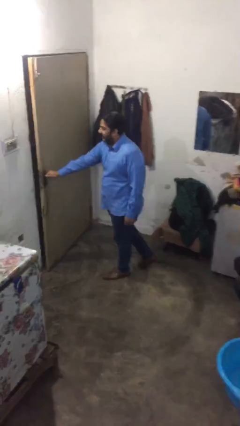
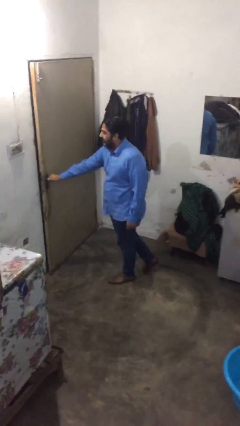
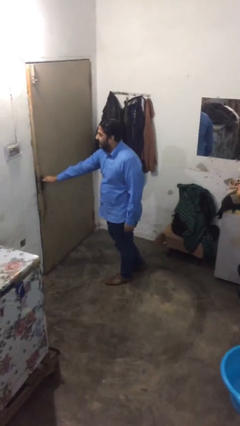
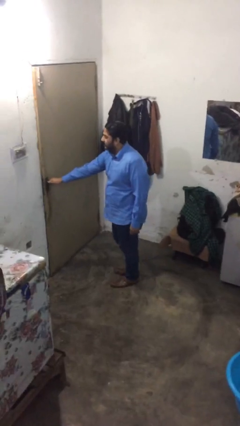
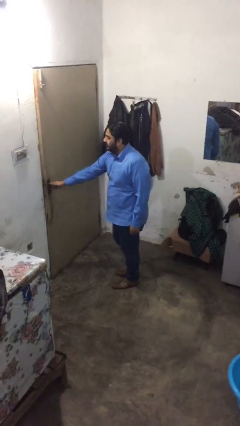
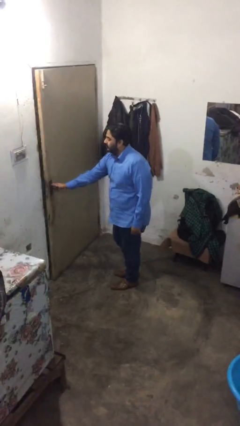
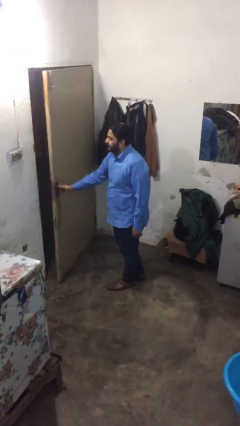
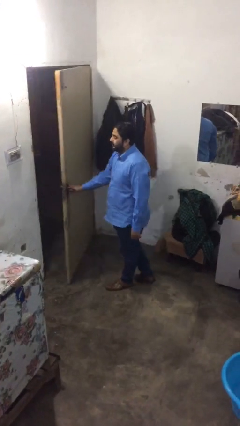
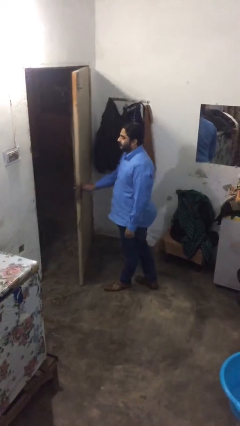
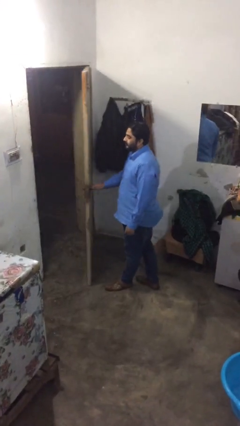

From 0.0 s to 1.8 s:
person opens facility door

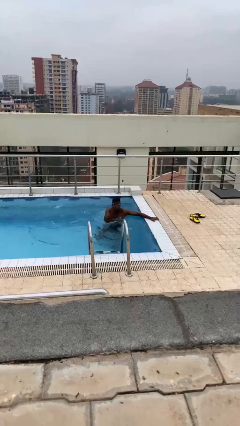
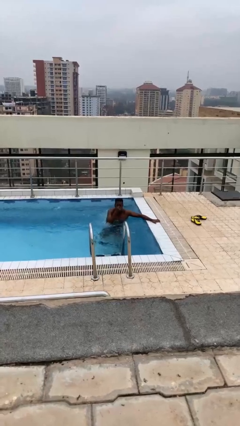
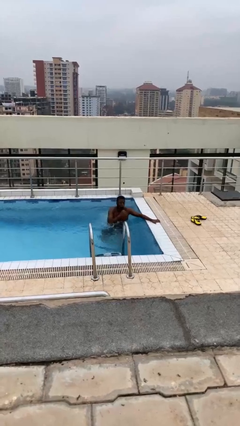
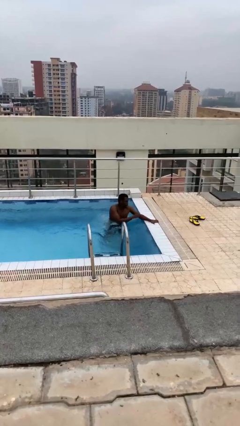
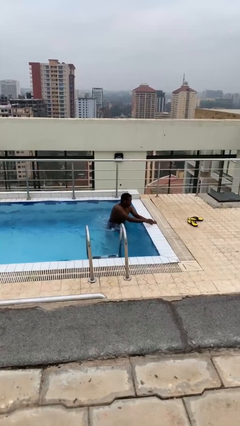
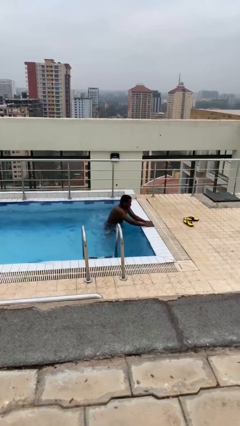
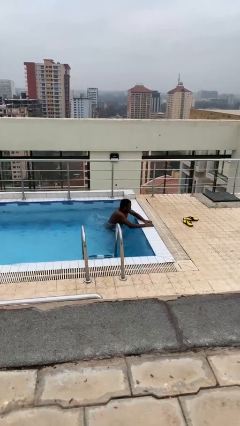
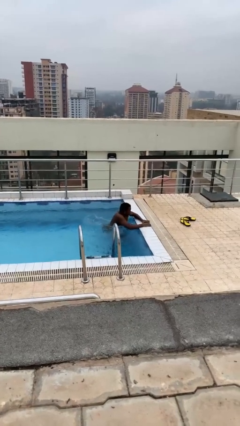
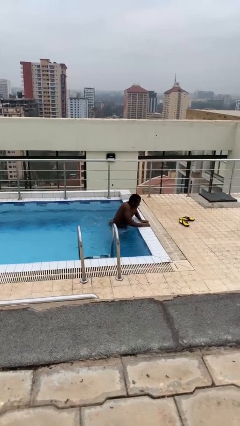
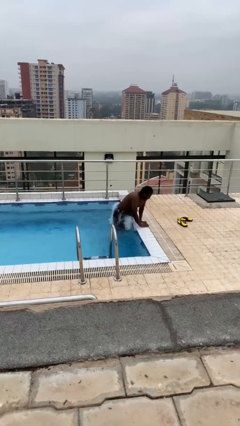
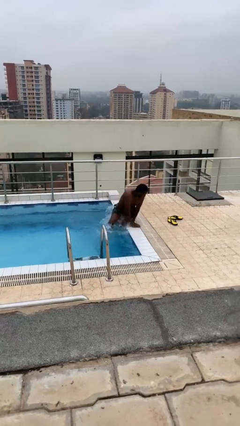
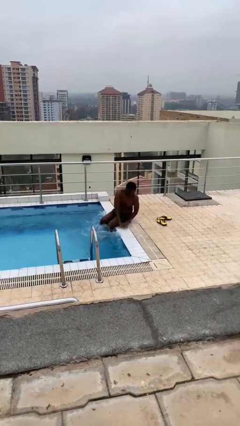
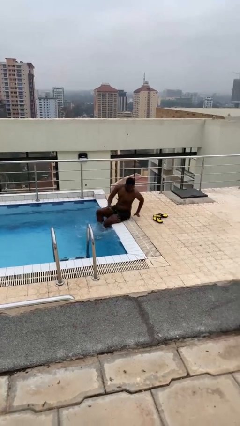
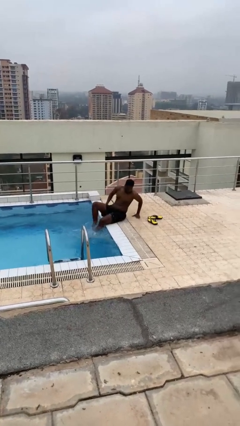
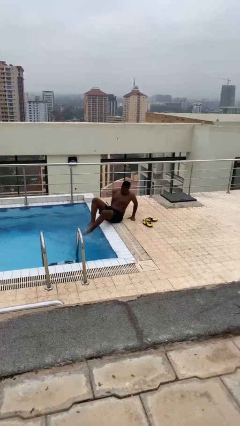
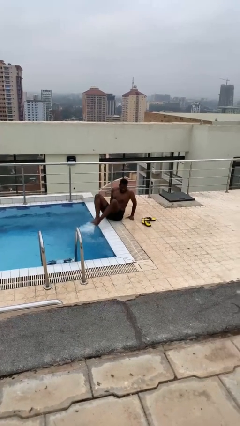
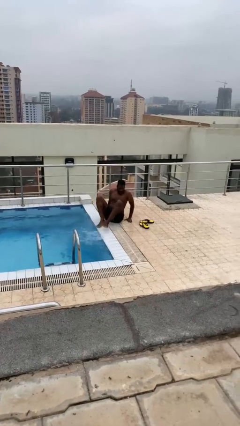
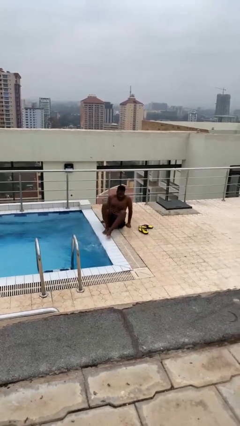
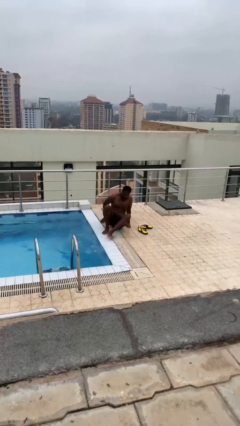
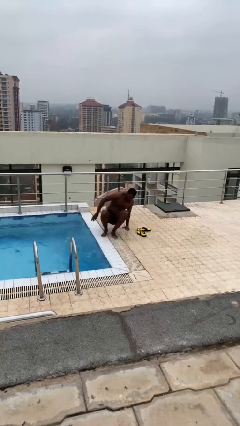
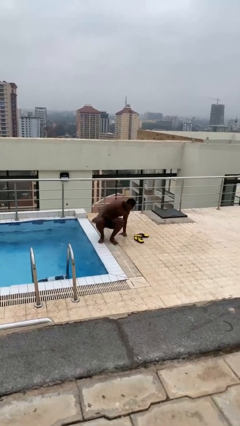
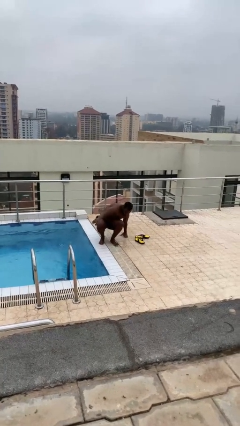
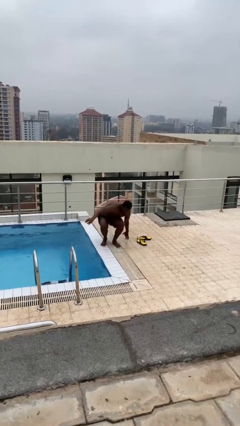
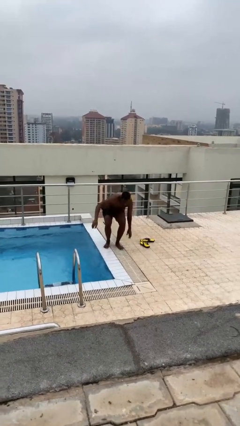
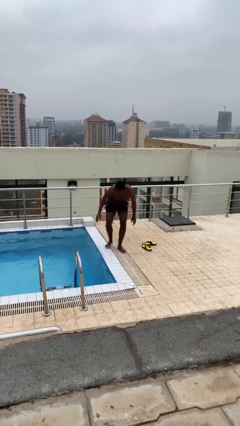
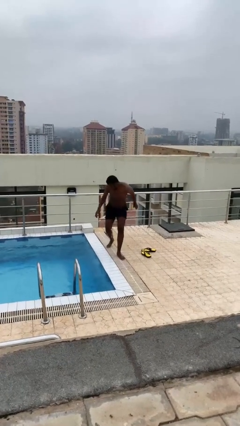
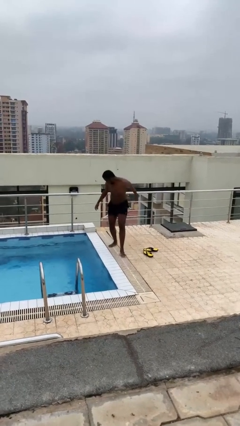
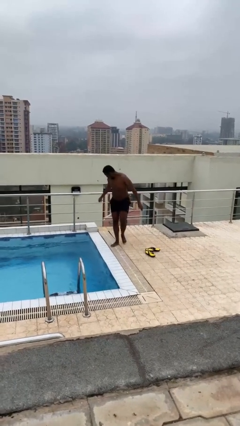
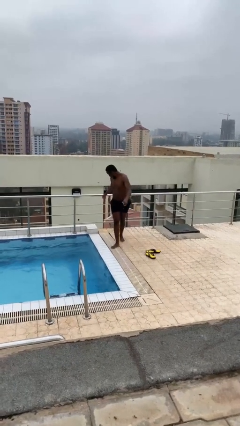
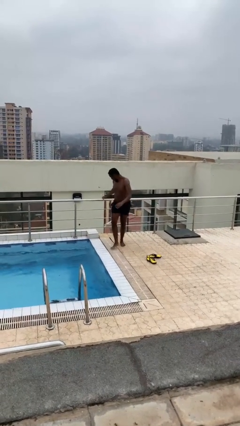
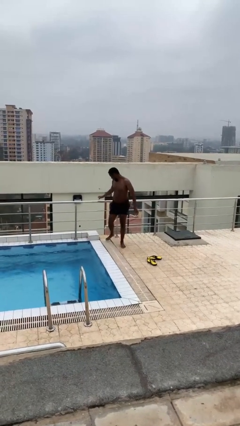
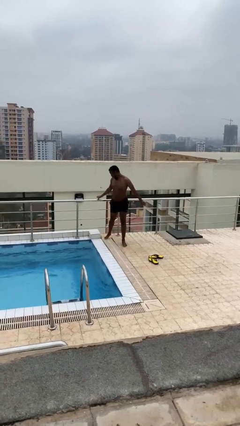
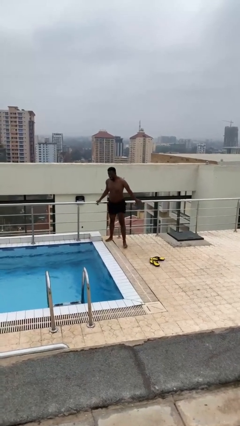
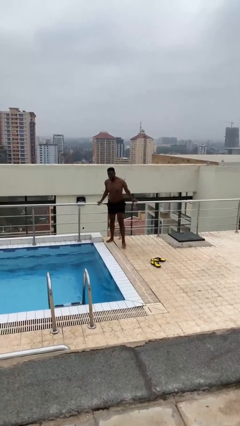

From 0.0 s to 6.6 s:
person exits pool

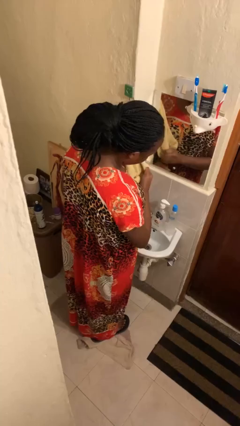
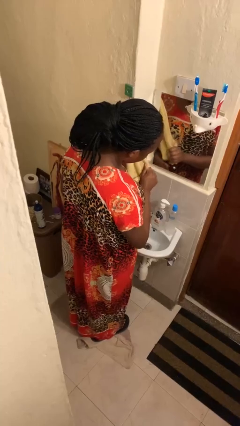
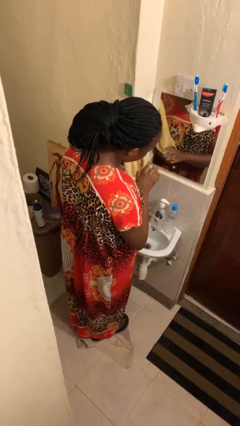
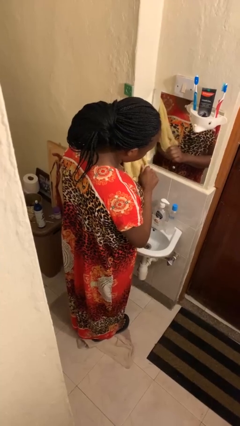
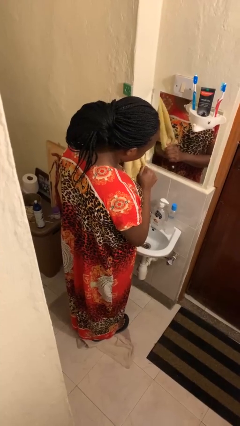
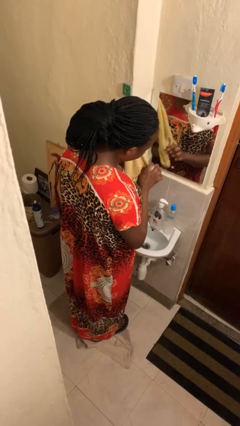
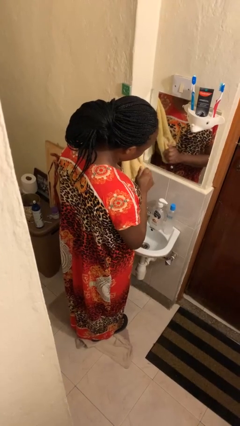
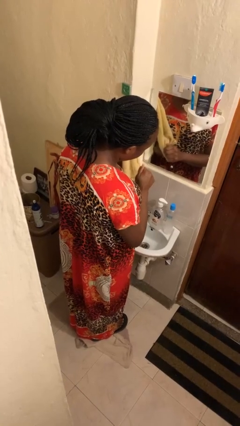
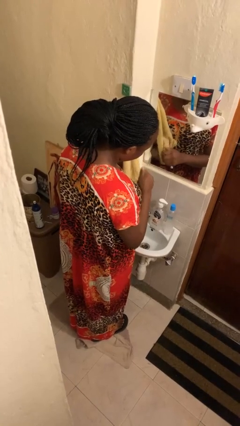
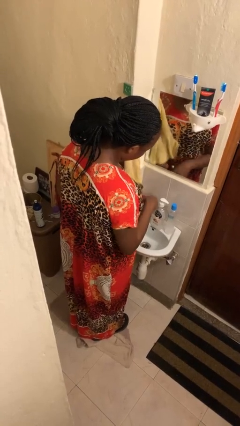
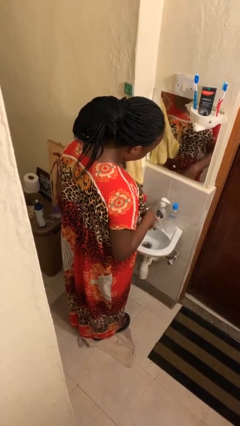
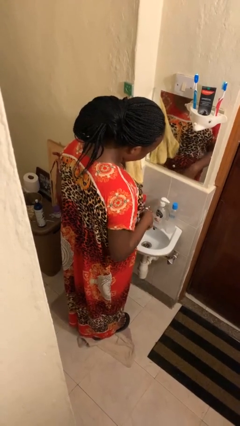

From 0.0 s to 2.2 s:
person dries hands with towel

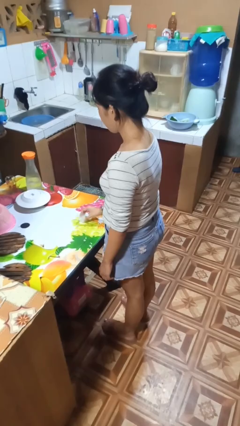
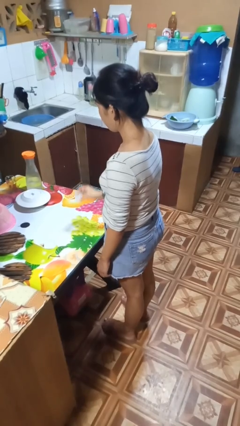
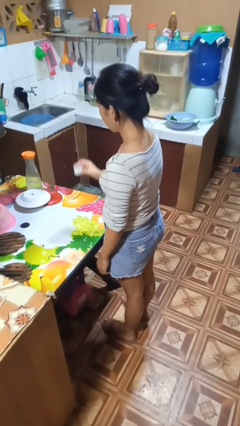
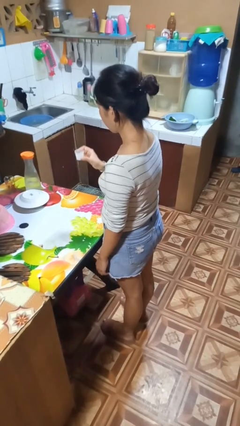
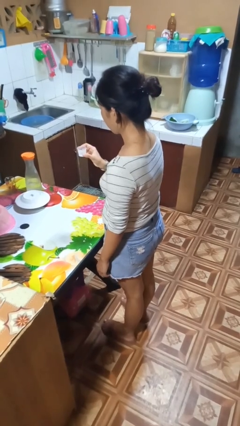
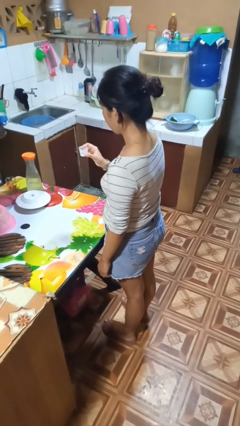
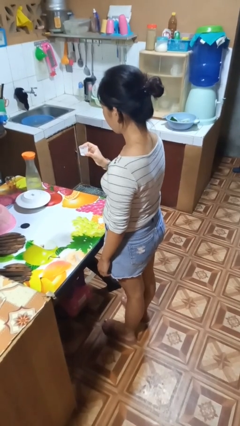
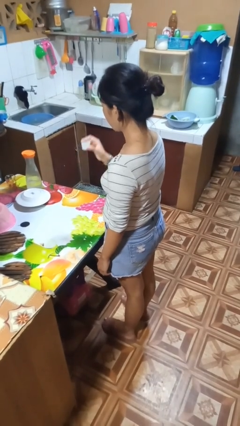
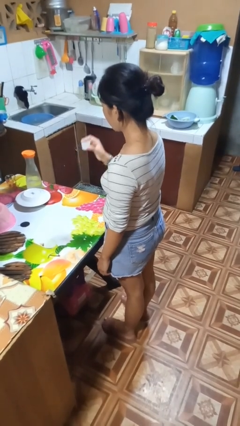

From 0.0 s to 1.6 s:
person picks up object from table

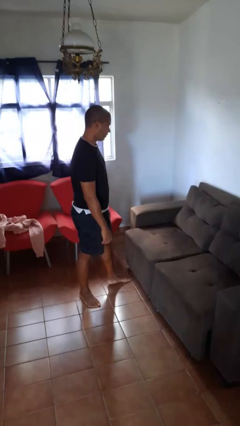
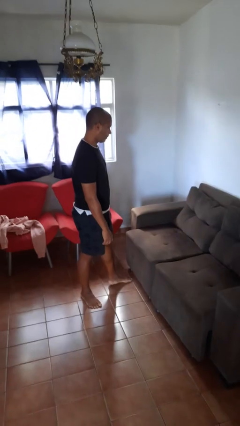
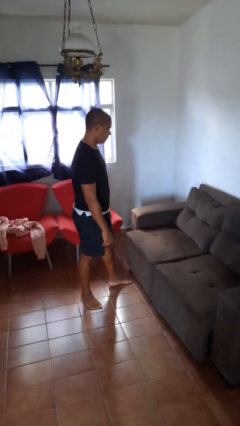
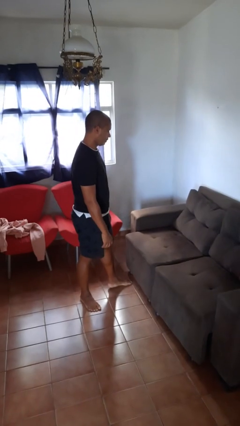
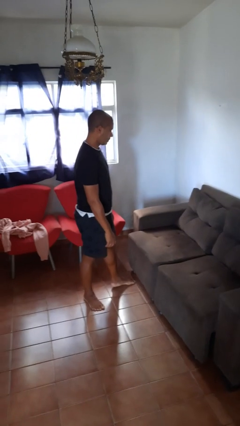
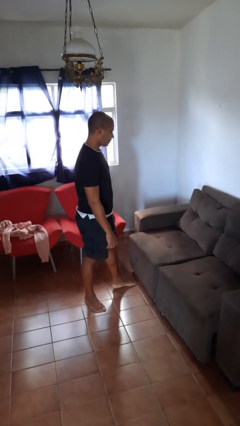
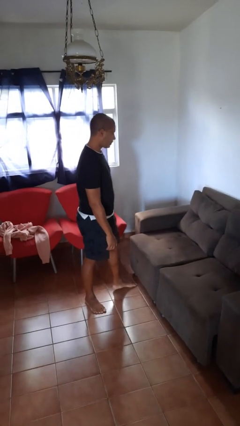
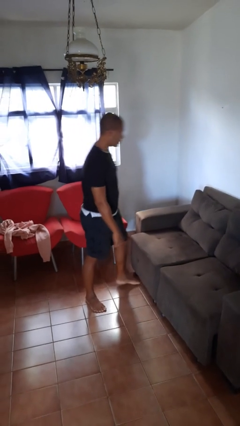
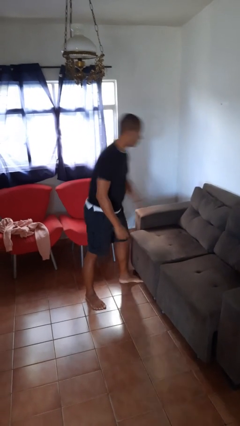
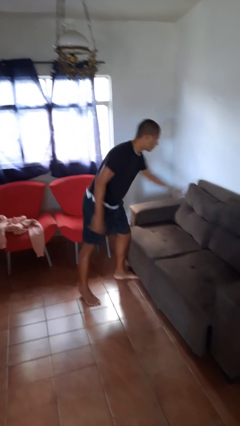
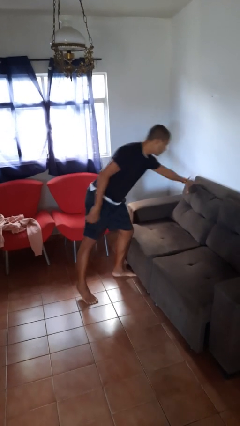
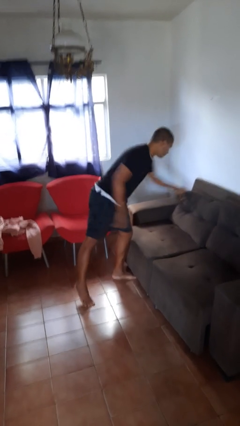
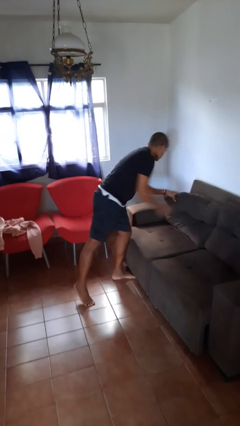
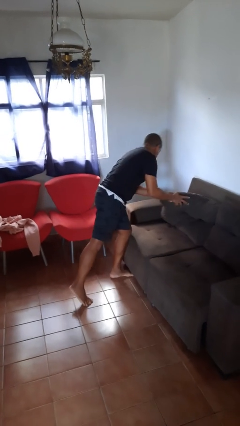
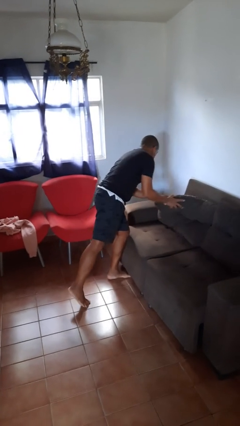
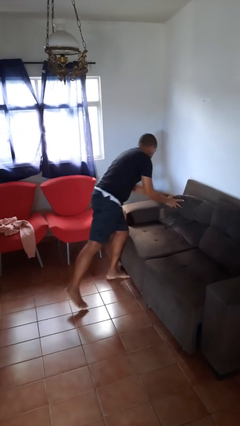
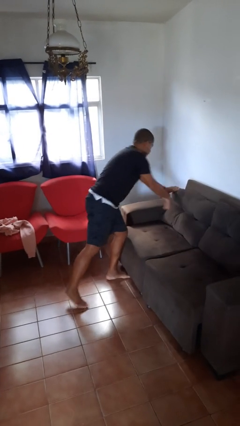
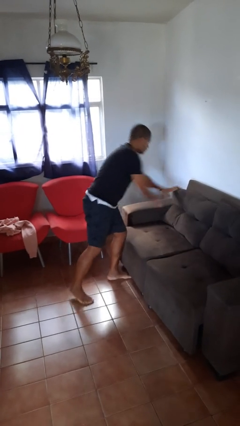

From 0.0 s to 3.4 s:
person searches under couch

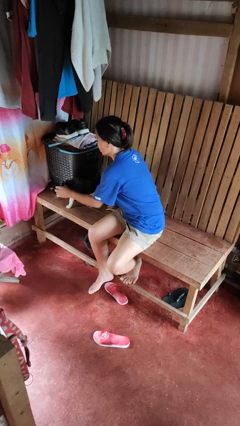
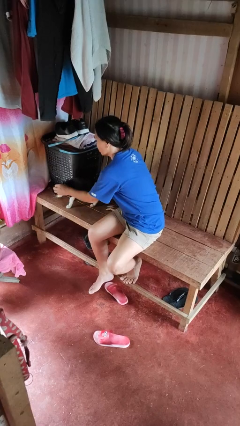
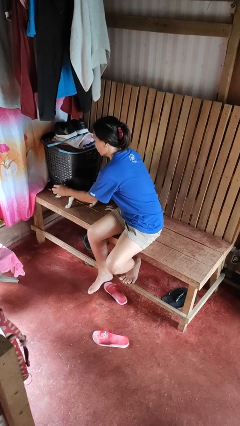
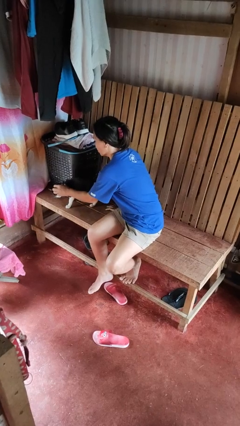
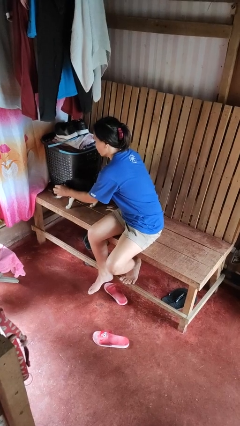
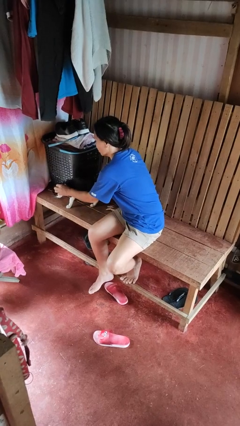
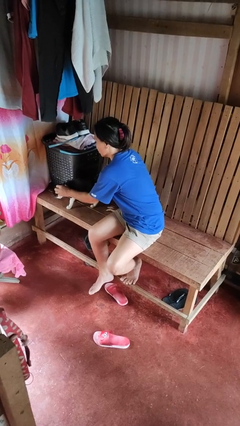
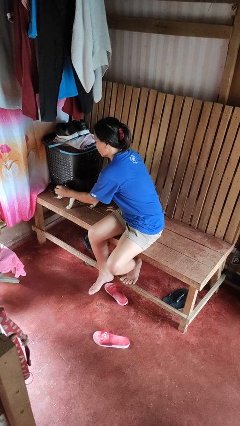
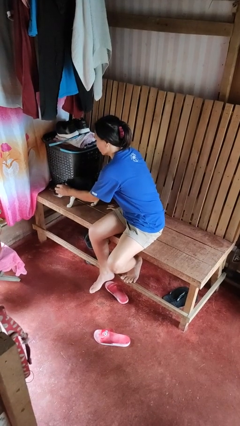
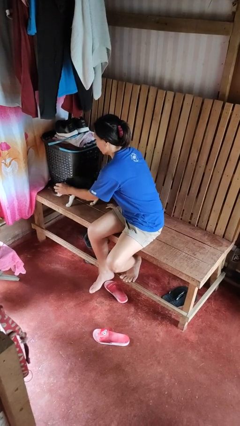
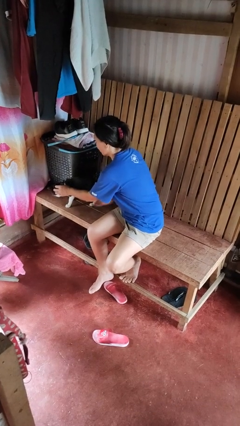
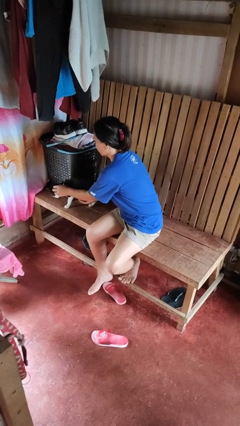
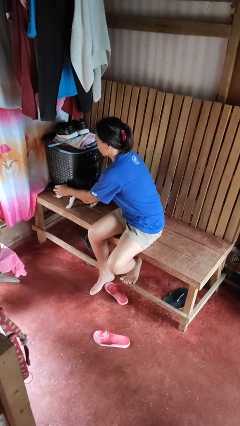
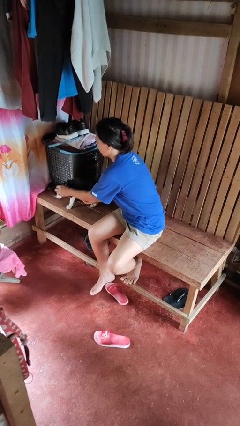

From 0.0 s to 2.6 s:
person pets cat
